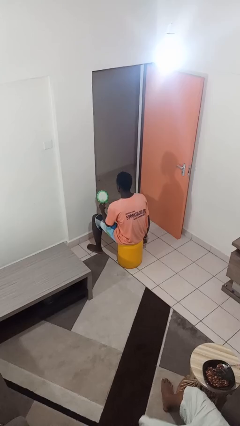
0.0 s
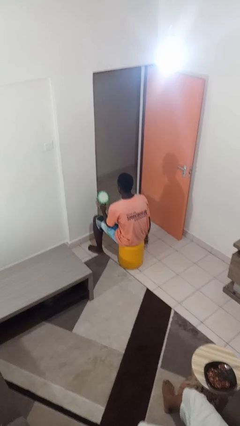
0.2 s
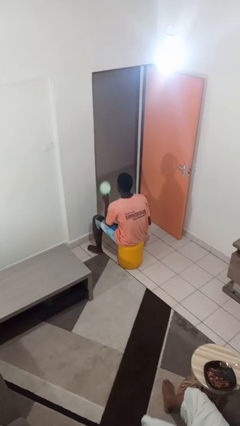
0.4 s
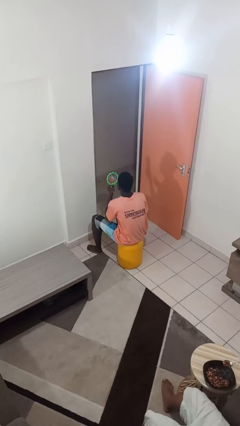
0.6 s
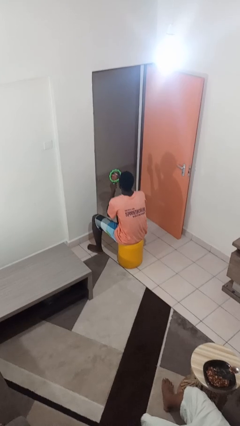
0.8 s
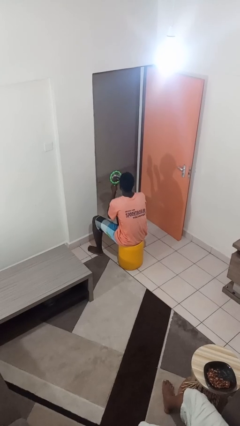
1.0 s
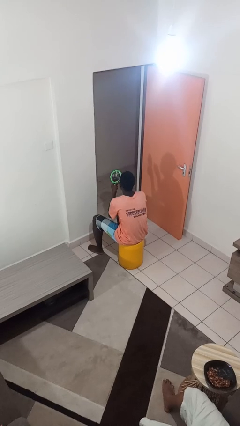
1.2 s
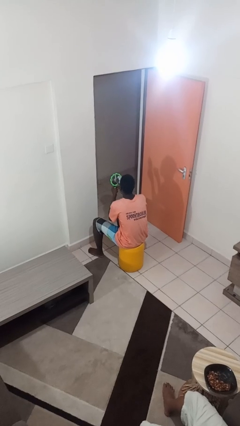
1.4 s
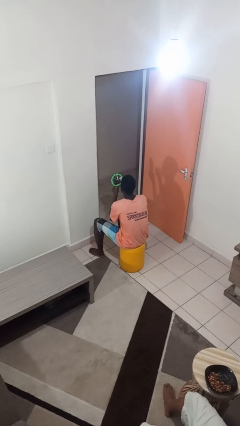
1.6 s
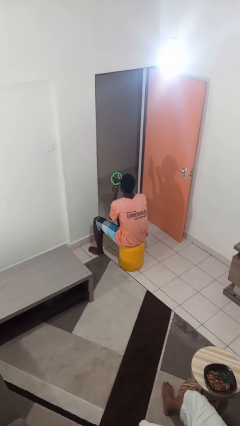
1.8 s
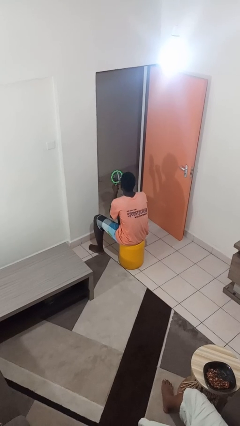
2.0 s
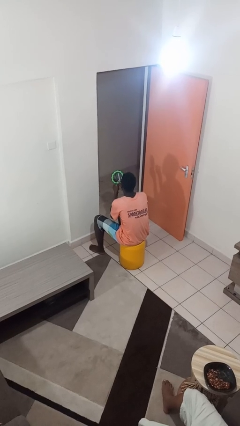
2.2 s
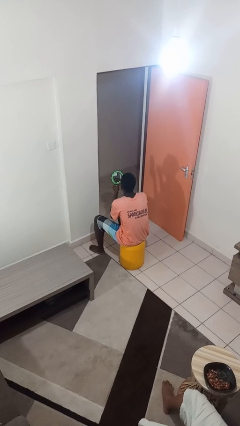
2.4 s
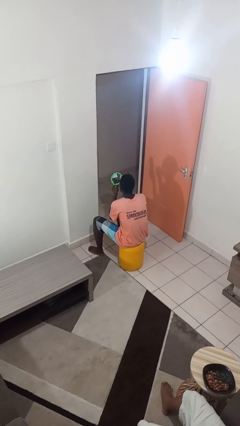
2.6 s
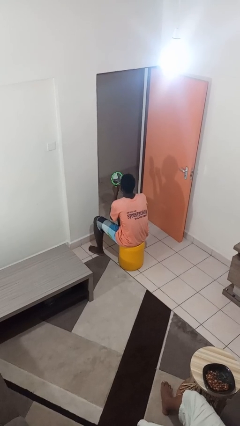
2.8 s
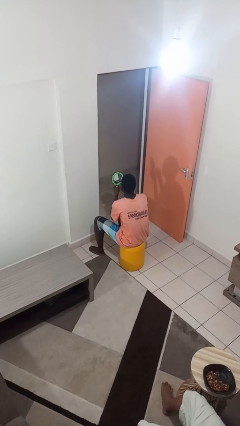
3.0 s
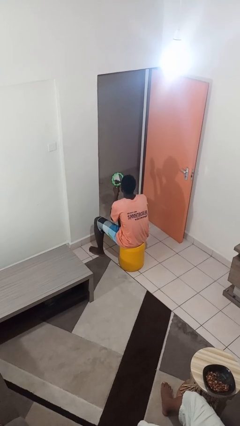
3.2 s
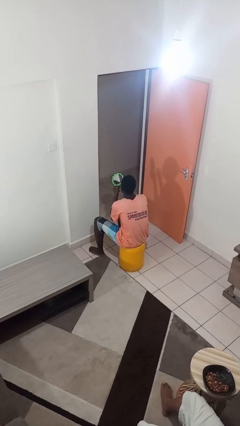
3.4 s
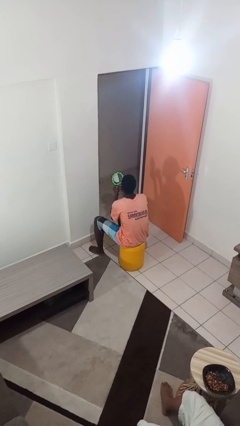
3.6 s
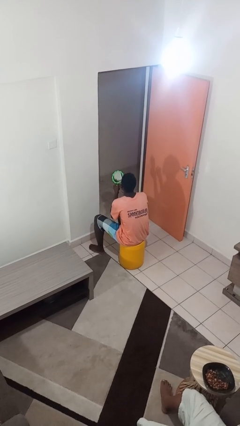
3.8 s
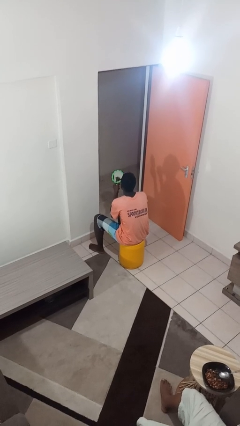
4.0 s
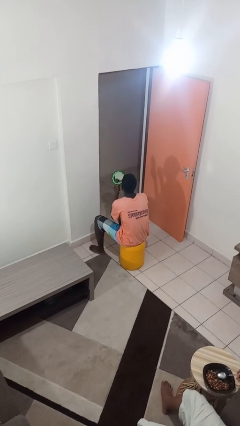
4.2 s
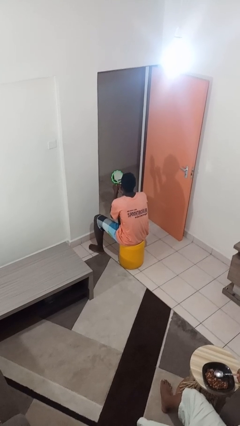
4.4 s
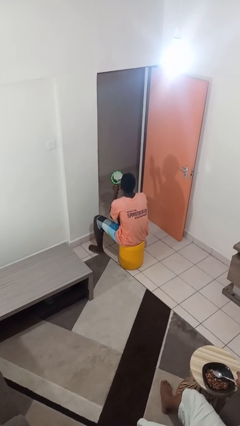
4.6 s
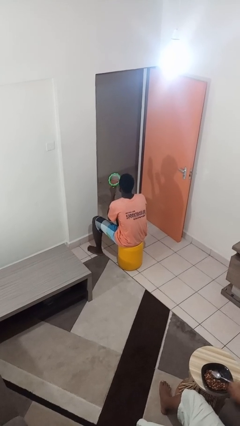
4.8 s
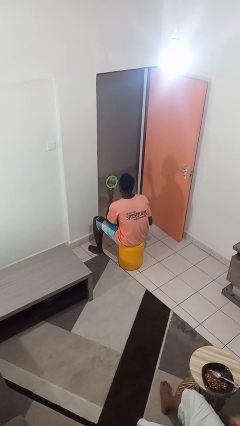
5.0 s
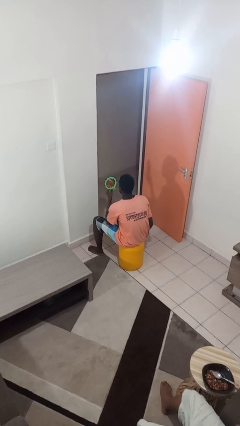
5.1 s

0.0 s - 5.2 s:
person applies lip makeup

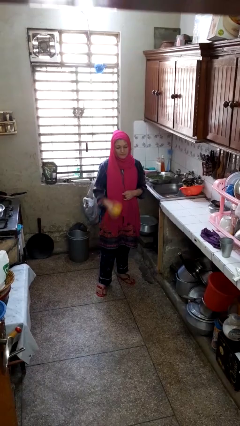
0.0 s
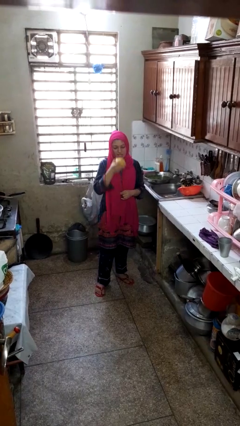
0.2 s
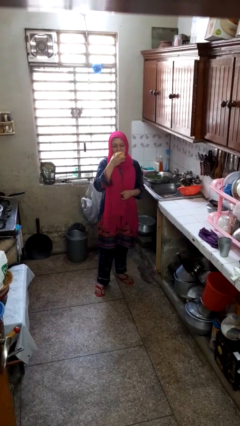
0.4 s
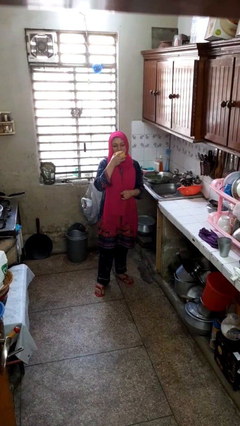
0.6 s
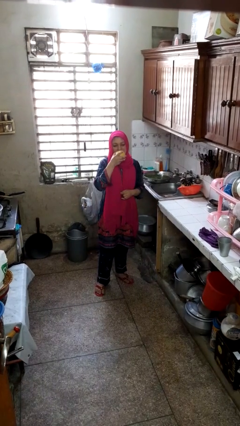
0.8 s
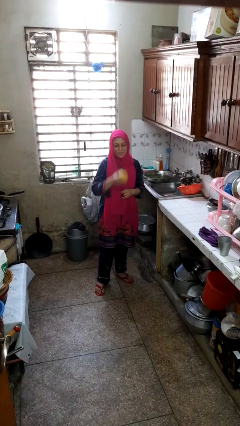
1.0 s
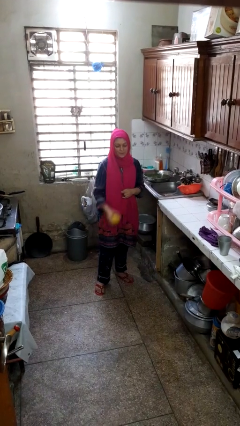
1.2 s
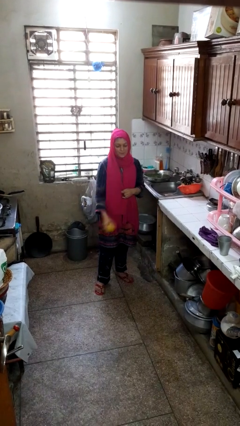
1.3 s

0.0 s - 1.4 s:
person eats apple

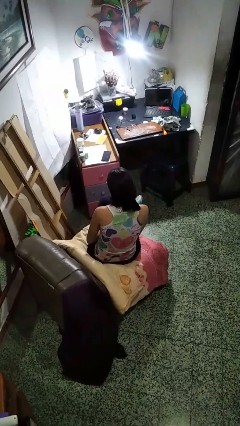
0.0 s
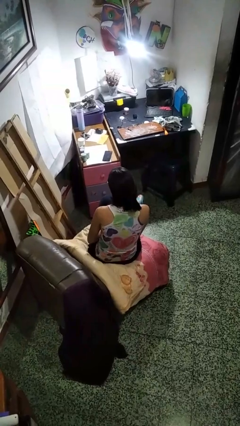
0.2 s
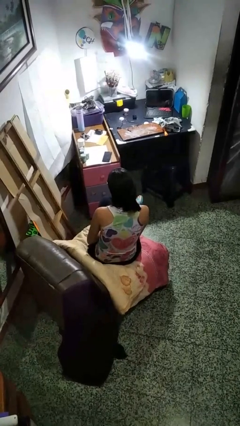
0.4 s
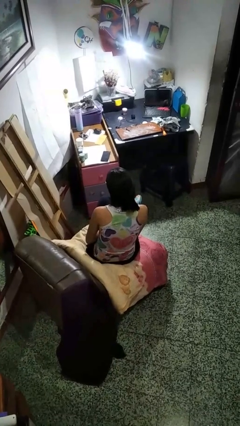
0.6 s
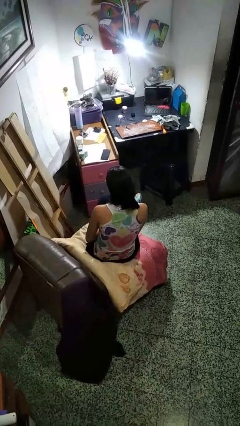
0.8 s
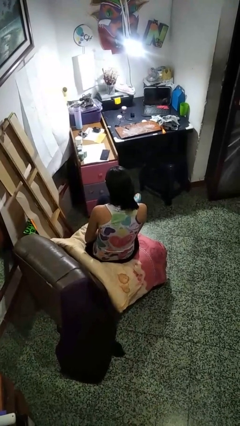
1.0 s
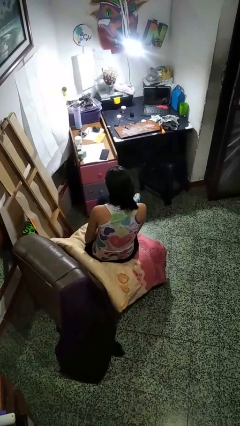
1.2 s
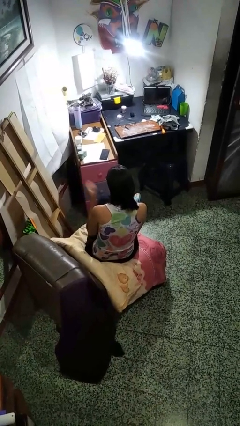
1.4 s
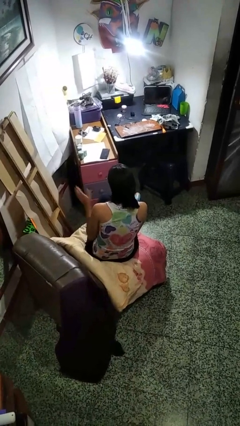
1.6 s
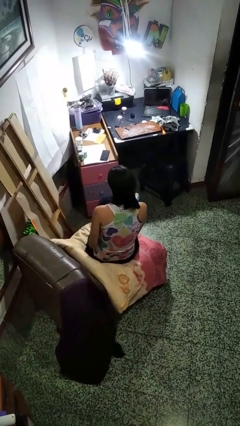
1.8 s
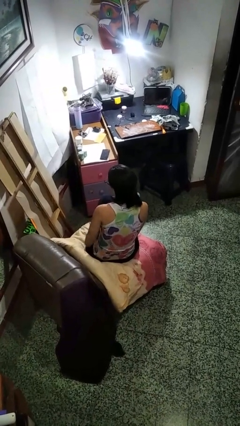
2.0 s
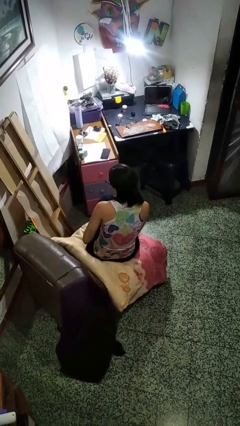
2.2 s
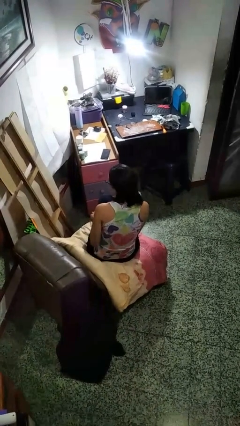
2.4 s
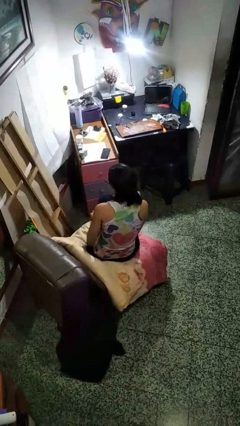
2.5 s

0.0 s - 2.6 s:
person slaps hands on thighs

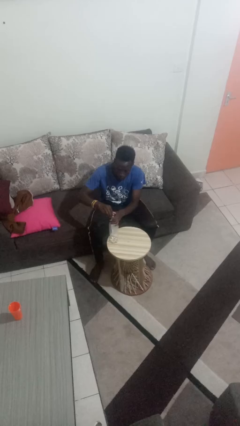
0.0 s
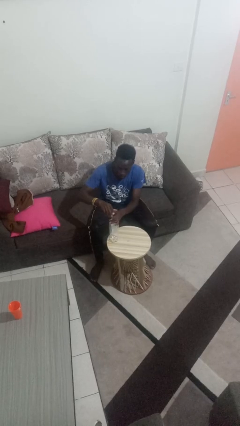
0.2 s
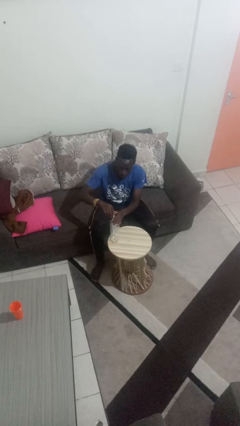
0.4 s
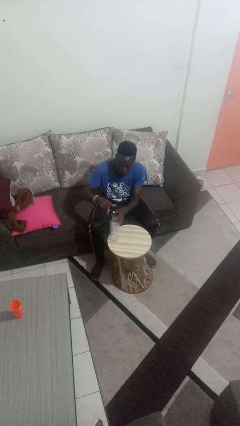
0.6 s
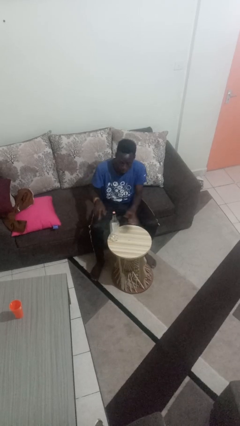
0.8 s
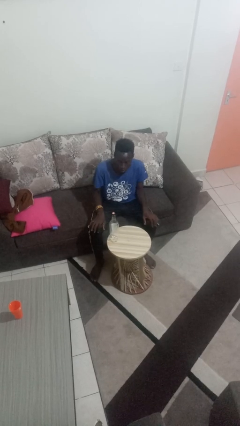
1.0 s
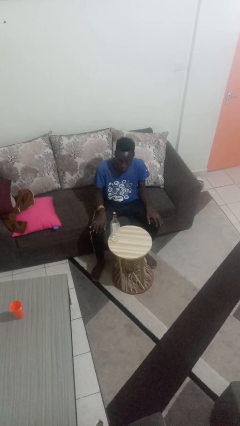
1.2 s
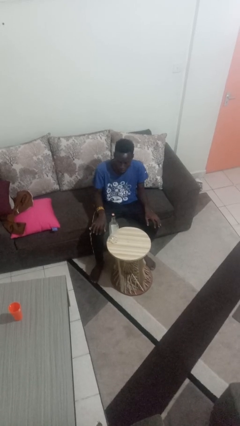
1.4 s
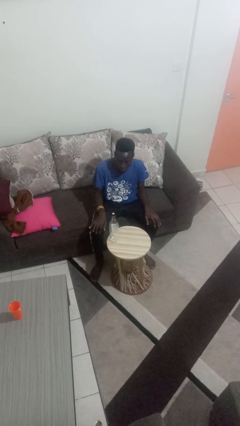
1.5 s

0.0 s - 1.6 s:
person screws lid to bottle

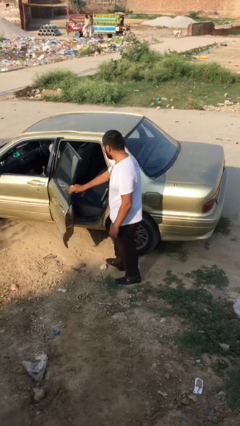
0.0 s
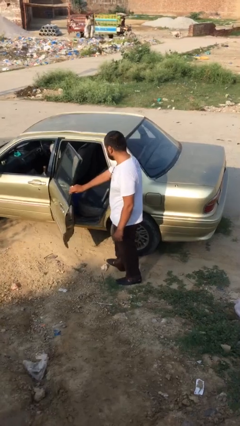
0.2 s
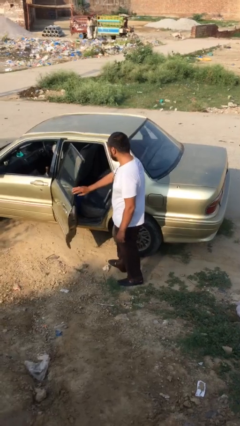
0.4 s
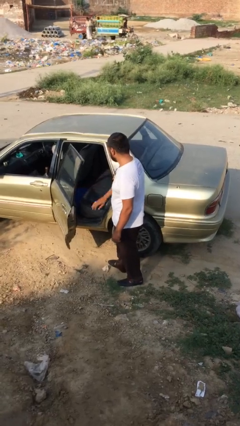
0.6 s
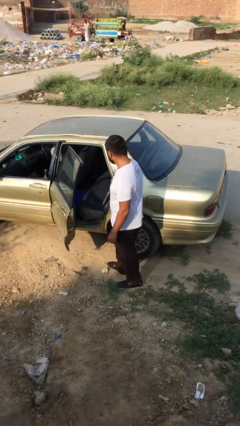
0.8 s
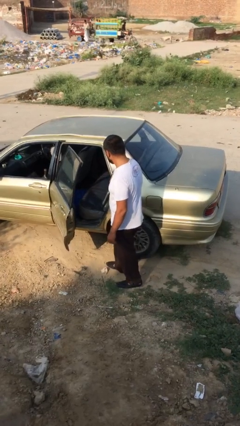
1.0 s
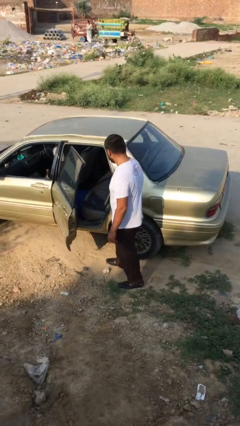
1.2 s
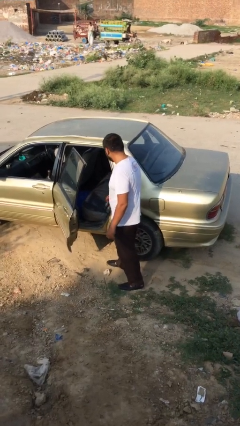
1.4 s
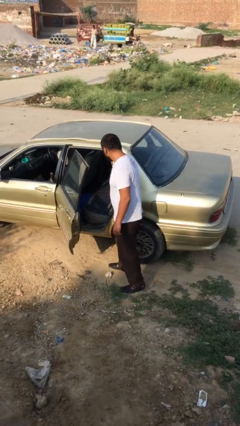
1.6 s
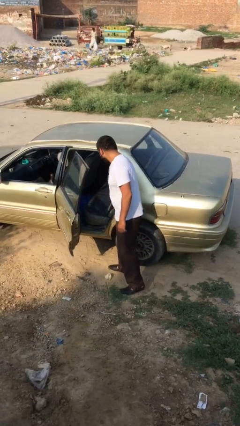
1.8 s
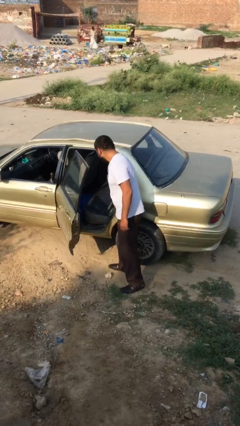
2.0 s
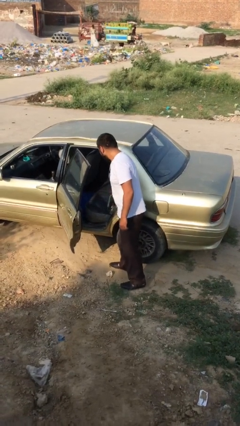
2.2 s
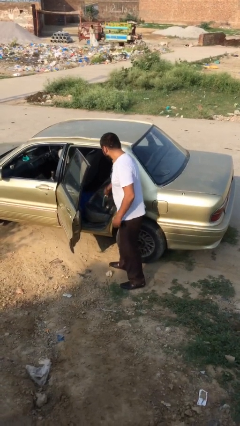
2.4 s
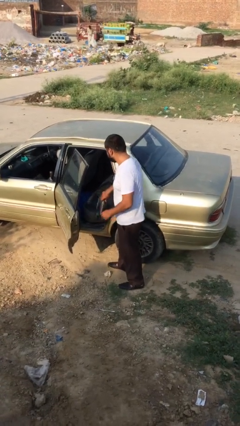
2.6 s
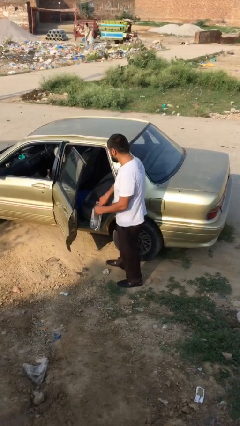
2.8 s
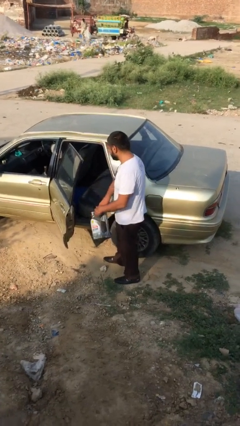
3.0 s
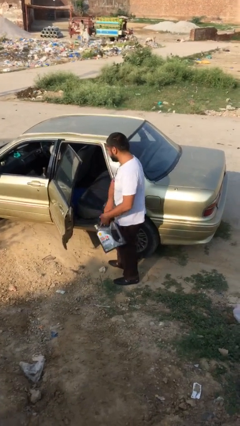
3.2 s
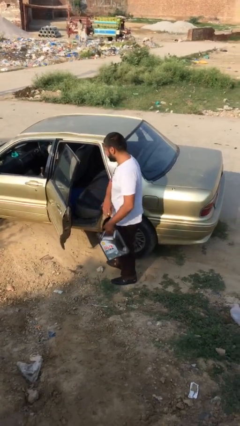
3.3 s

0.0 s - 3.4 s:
person unloads car

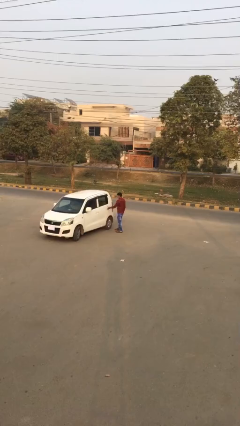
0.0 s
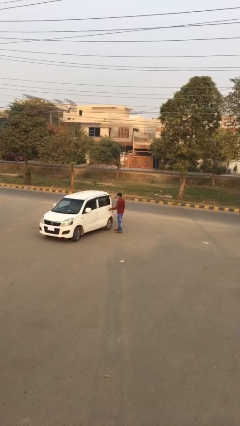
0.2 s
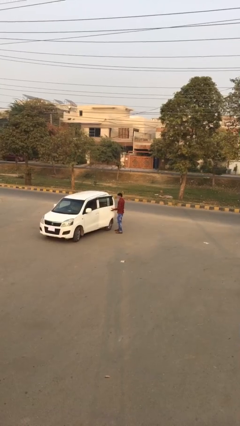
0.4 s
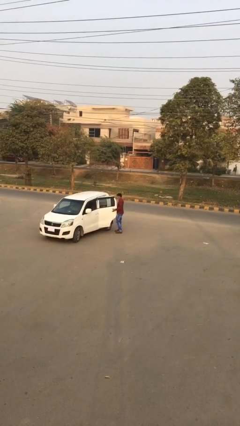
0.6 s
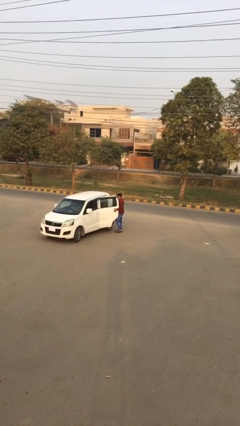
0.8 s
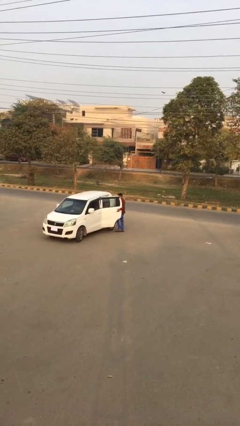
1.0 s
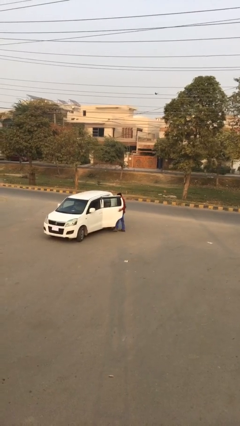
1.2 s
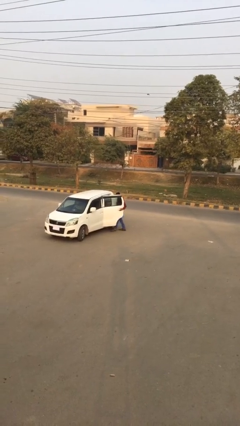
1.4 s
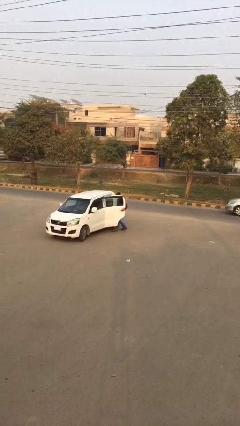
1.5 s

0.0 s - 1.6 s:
person opens car door

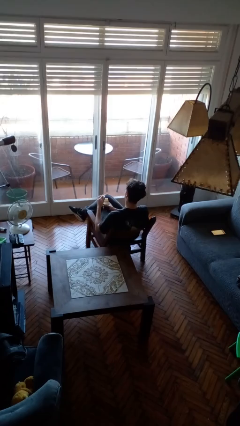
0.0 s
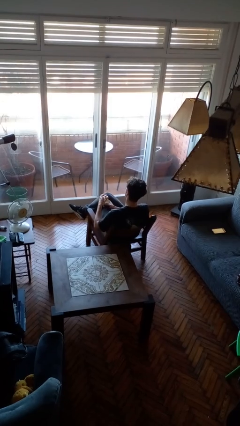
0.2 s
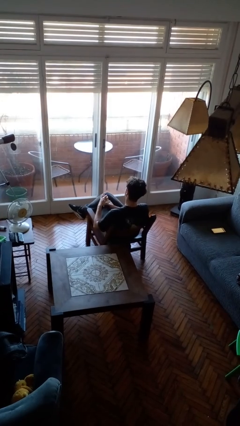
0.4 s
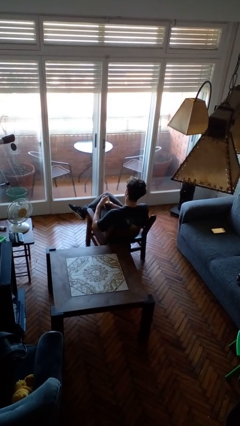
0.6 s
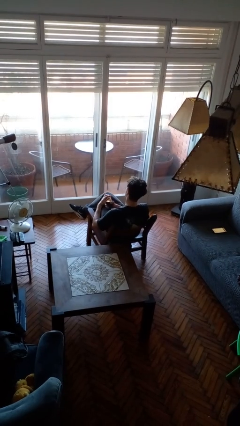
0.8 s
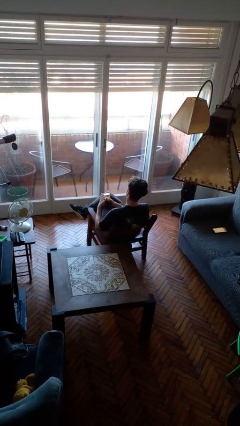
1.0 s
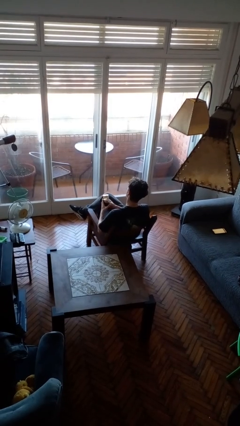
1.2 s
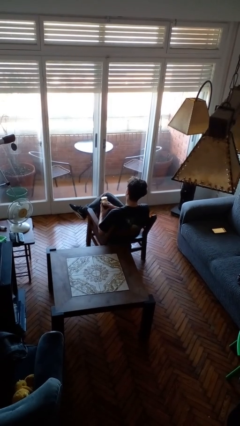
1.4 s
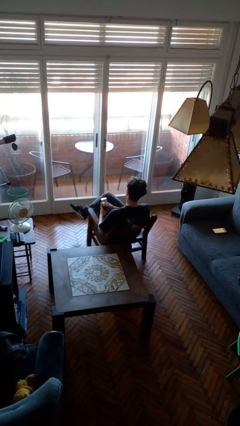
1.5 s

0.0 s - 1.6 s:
person closes jar

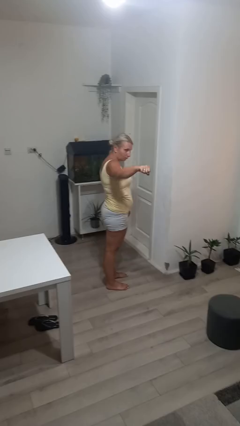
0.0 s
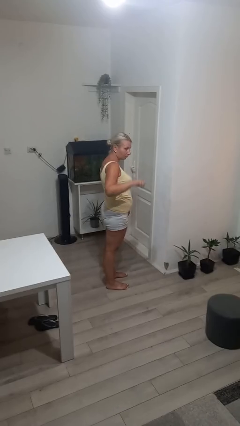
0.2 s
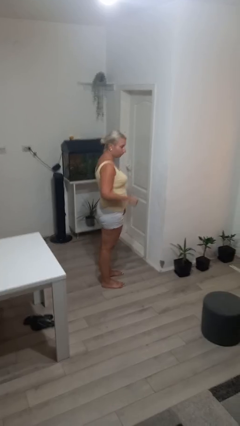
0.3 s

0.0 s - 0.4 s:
person karate chop
